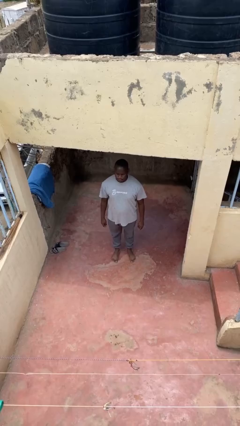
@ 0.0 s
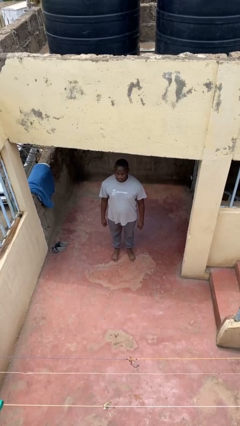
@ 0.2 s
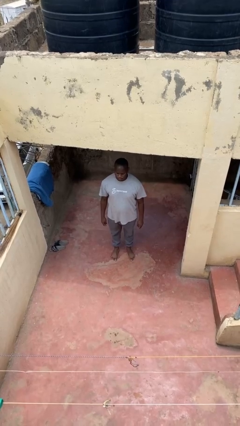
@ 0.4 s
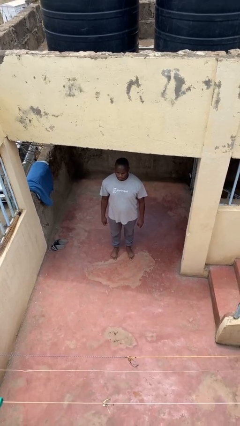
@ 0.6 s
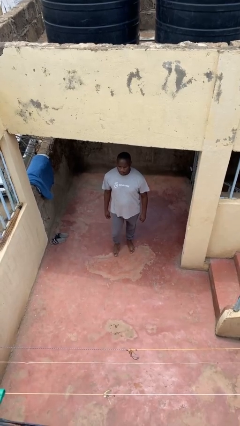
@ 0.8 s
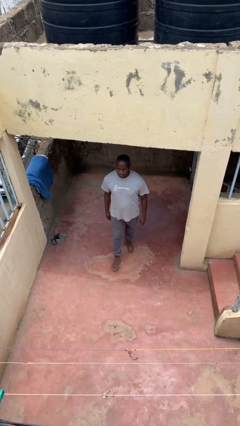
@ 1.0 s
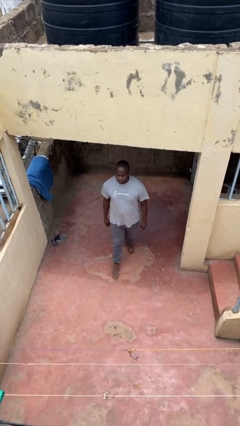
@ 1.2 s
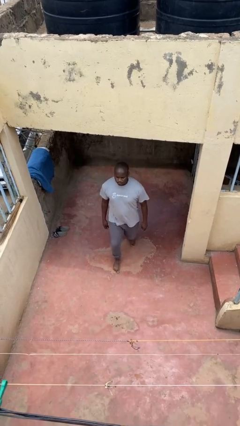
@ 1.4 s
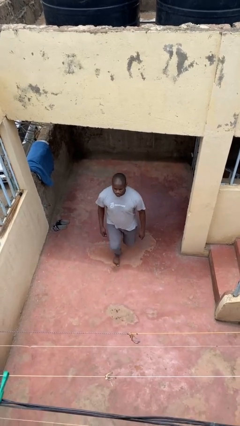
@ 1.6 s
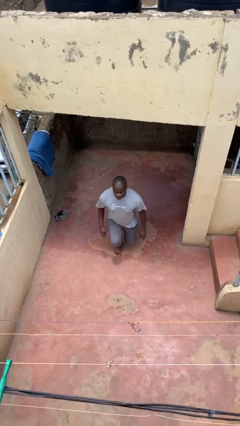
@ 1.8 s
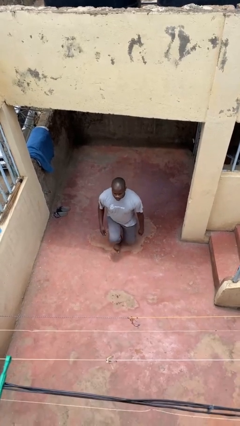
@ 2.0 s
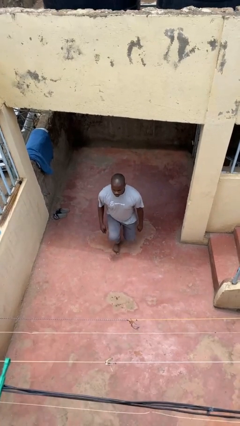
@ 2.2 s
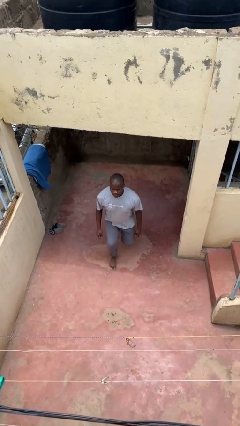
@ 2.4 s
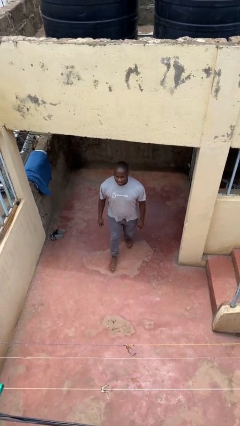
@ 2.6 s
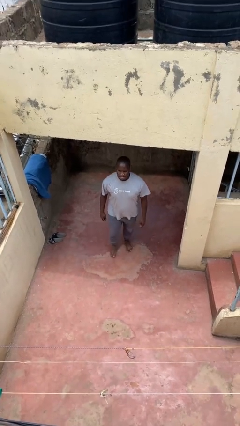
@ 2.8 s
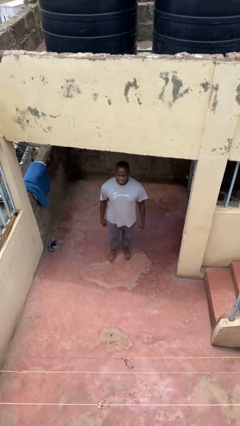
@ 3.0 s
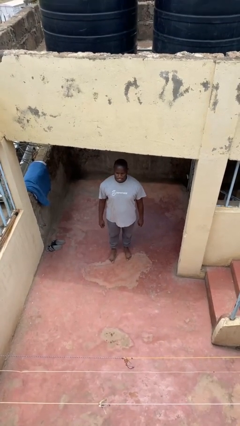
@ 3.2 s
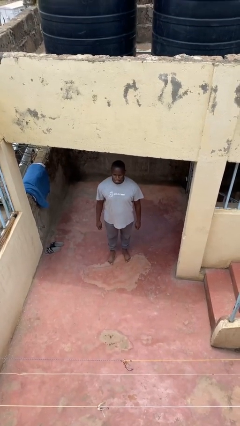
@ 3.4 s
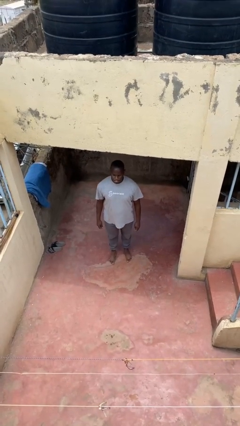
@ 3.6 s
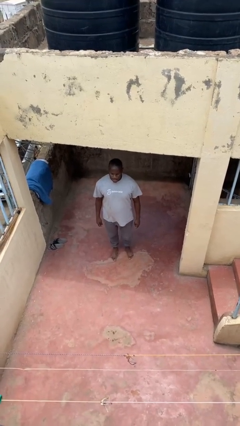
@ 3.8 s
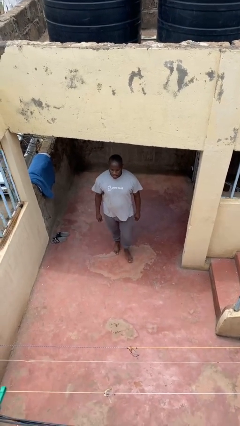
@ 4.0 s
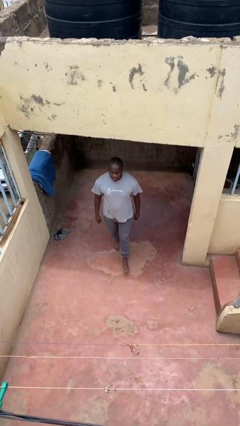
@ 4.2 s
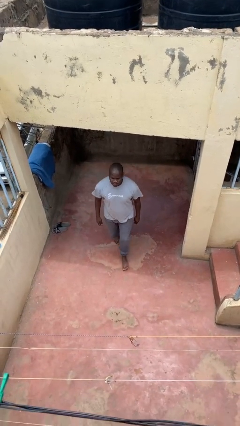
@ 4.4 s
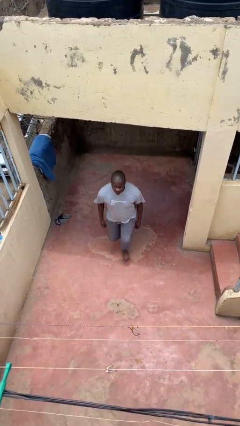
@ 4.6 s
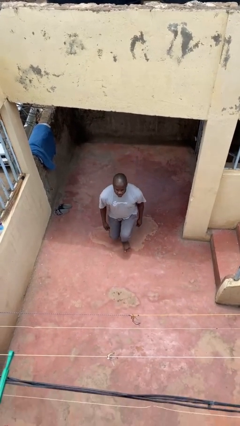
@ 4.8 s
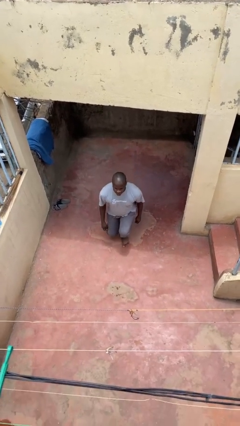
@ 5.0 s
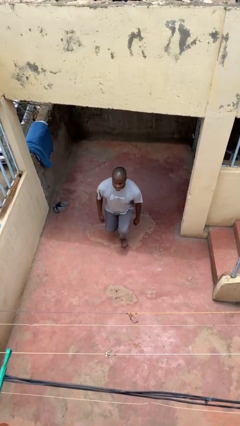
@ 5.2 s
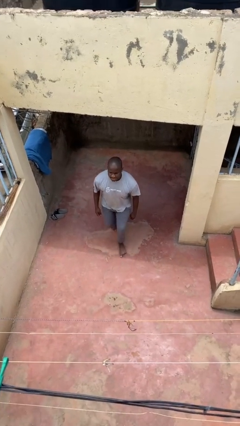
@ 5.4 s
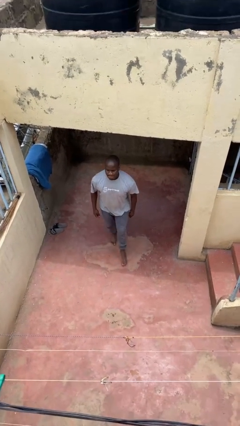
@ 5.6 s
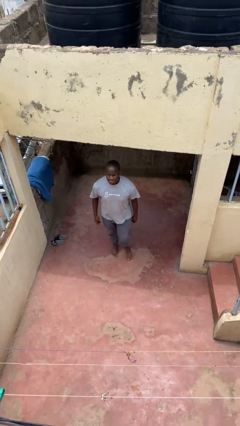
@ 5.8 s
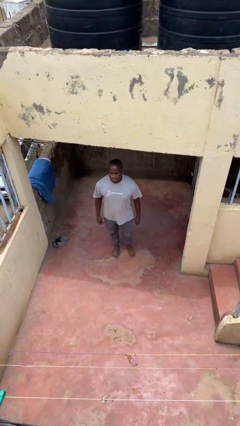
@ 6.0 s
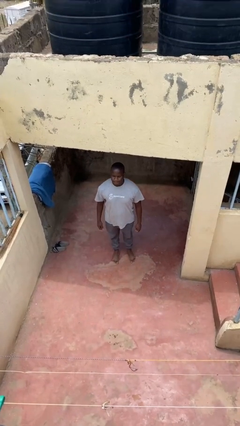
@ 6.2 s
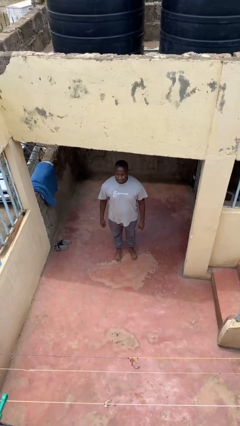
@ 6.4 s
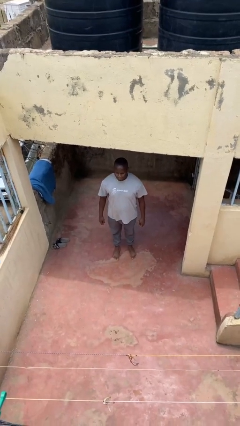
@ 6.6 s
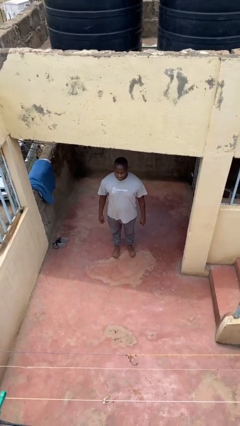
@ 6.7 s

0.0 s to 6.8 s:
person exercises with lunges

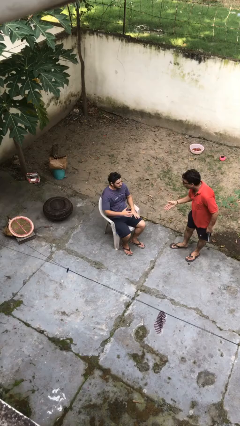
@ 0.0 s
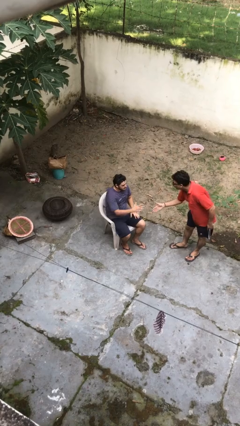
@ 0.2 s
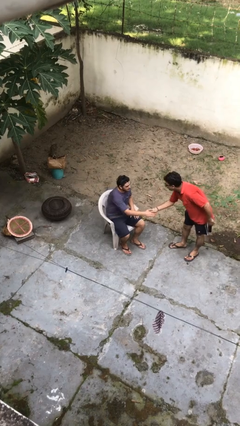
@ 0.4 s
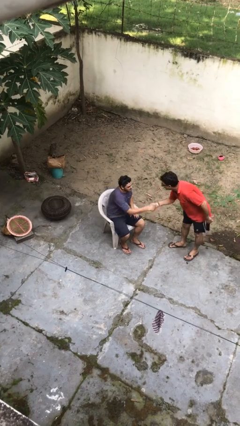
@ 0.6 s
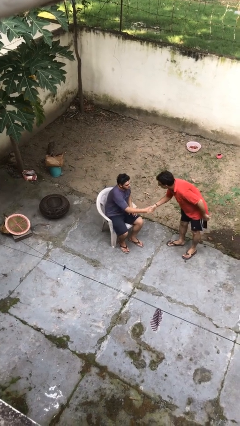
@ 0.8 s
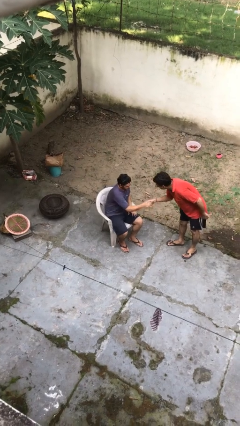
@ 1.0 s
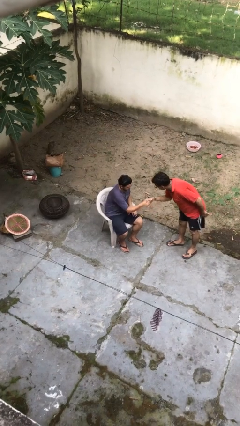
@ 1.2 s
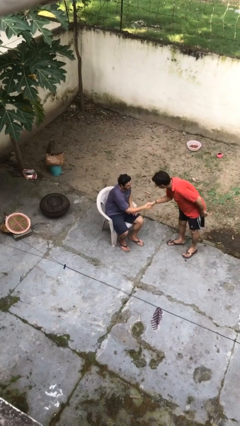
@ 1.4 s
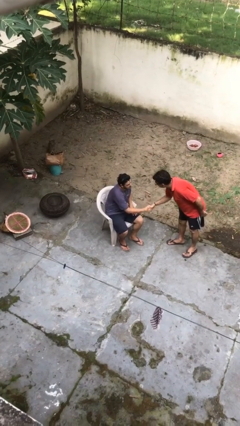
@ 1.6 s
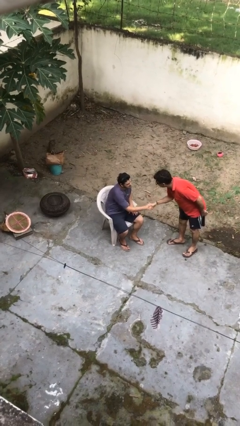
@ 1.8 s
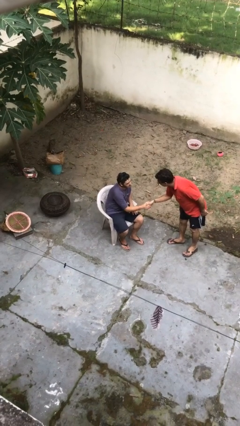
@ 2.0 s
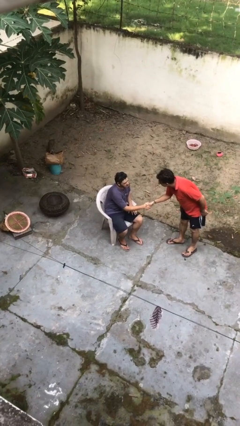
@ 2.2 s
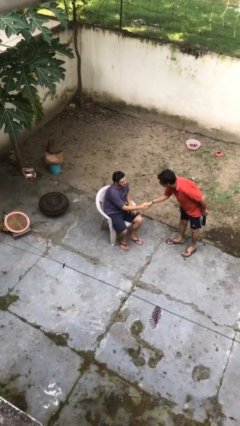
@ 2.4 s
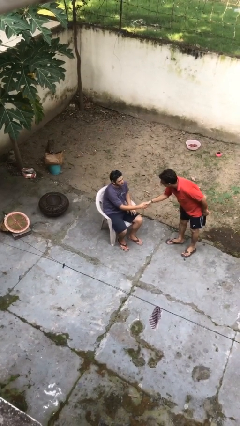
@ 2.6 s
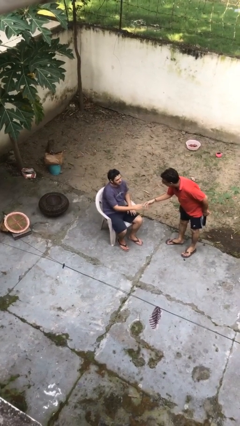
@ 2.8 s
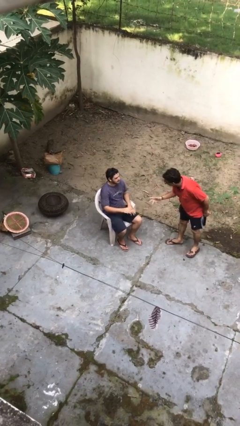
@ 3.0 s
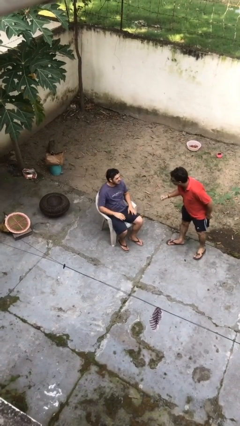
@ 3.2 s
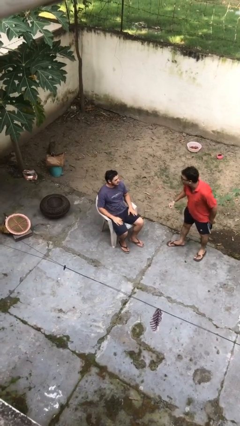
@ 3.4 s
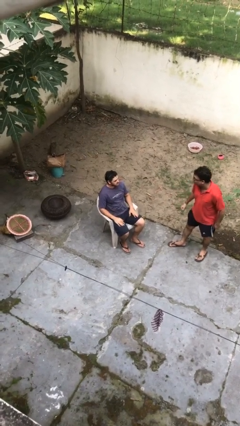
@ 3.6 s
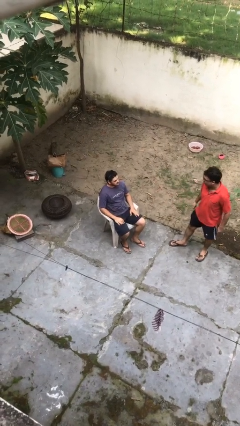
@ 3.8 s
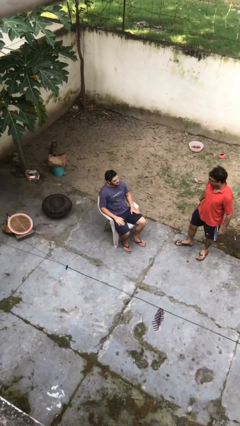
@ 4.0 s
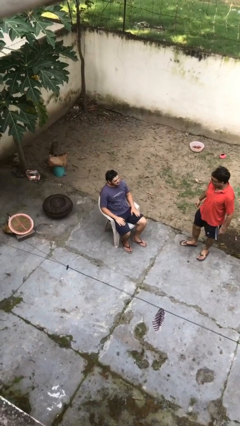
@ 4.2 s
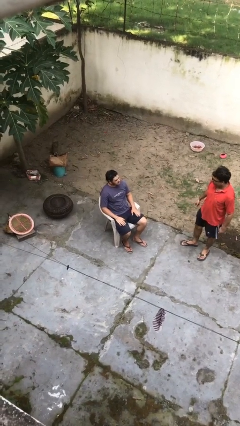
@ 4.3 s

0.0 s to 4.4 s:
person shakes hand

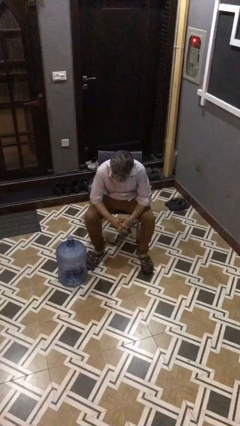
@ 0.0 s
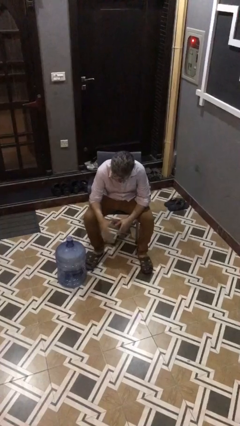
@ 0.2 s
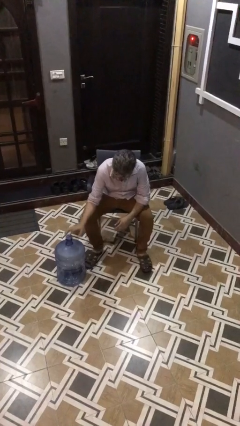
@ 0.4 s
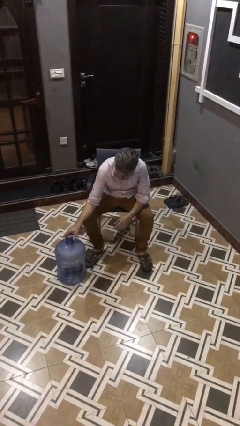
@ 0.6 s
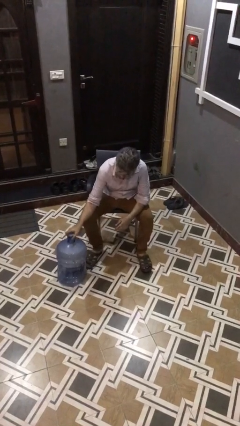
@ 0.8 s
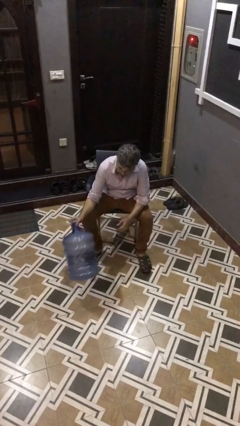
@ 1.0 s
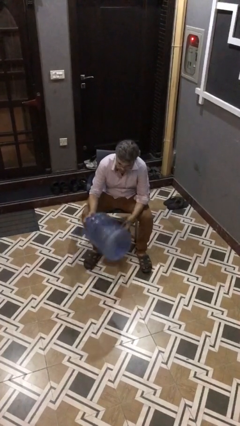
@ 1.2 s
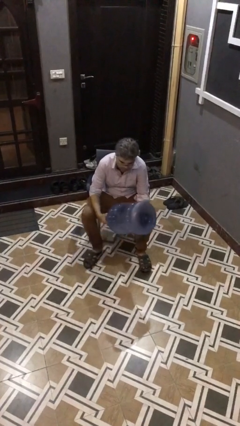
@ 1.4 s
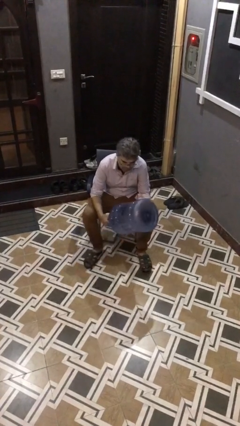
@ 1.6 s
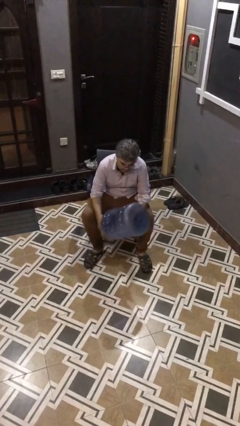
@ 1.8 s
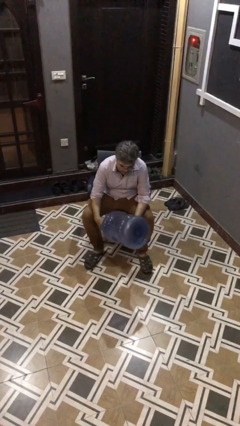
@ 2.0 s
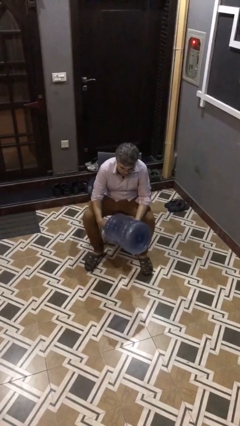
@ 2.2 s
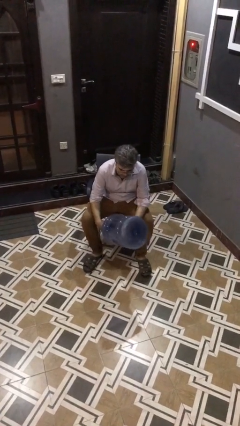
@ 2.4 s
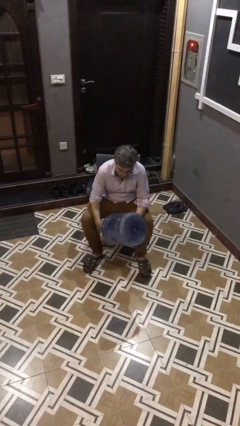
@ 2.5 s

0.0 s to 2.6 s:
person picks up object from floor

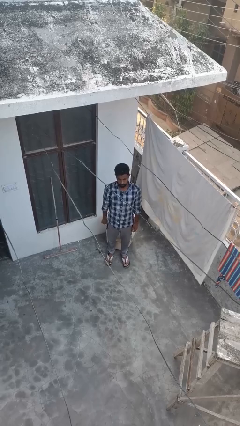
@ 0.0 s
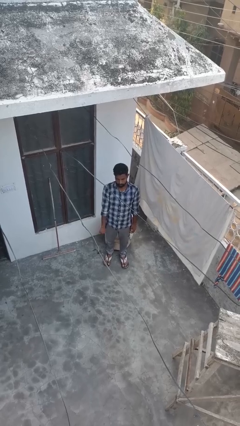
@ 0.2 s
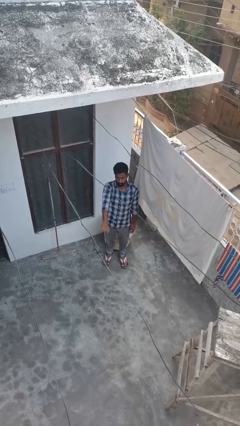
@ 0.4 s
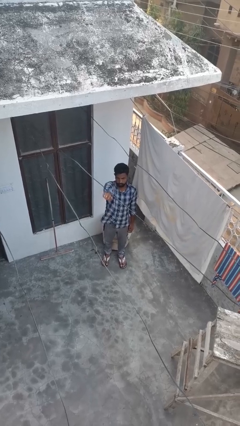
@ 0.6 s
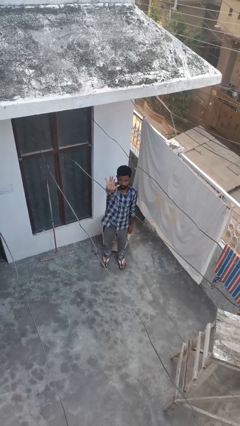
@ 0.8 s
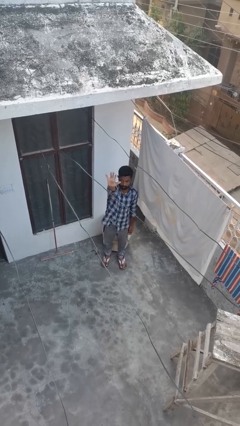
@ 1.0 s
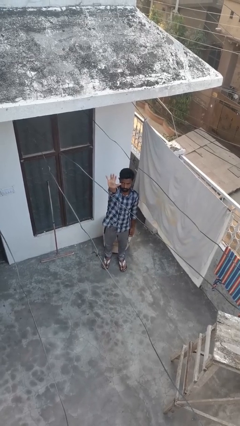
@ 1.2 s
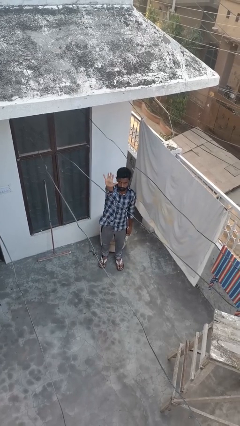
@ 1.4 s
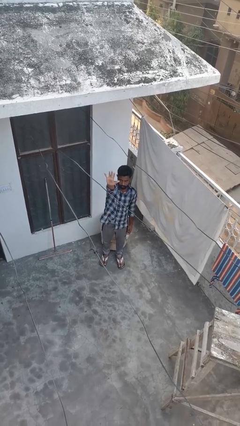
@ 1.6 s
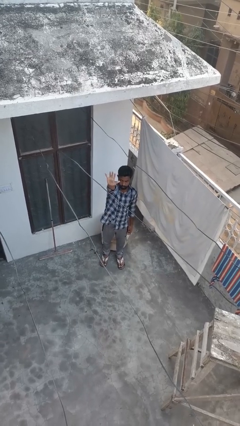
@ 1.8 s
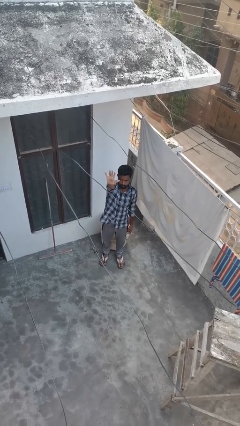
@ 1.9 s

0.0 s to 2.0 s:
person gestures number five

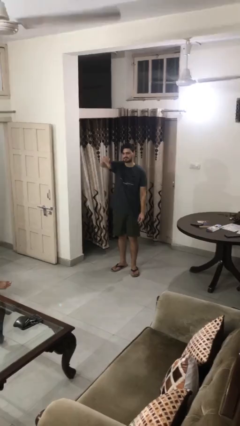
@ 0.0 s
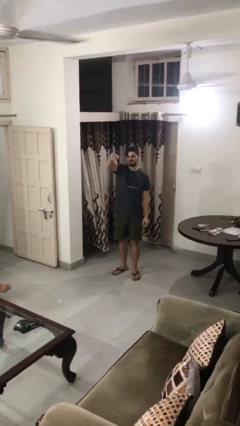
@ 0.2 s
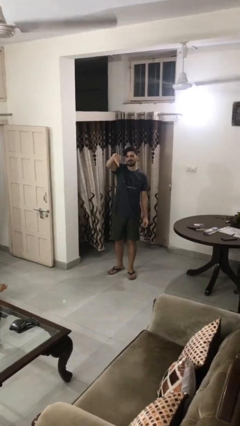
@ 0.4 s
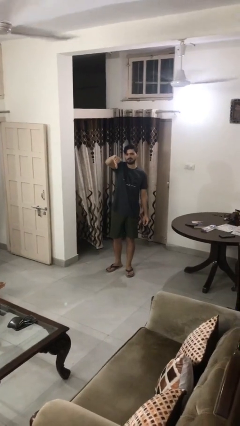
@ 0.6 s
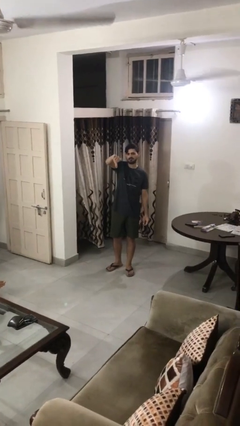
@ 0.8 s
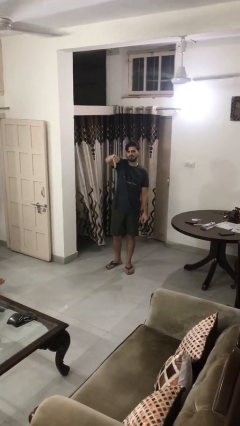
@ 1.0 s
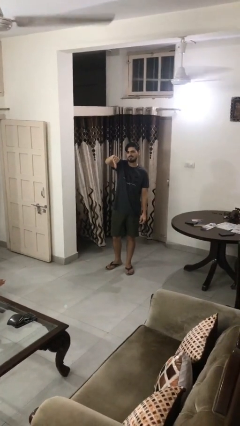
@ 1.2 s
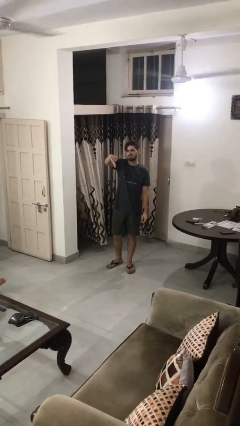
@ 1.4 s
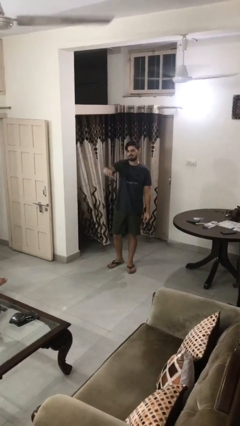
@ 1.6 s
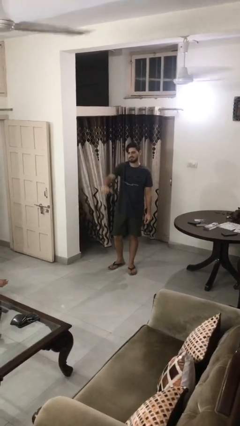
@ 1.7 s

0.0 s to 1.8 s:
person gestures thumbs down
